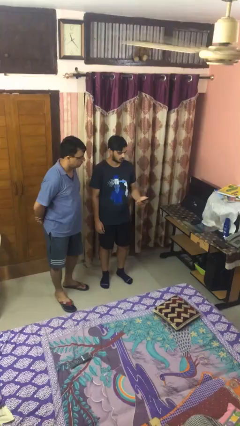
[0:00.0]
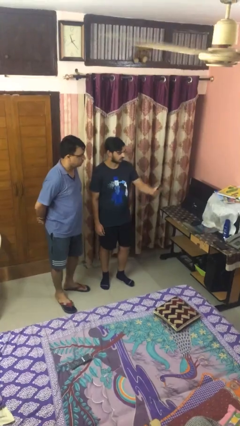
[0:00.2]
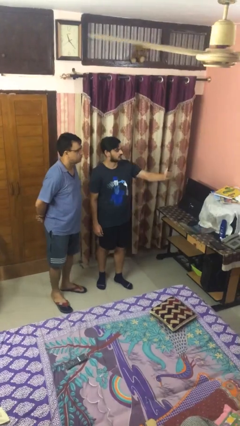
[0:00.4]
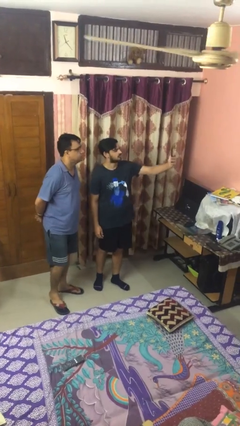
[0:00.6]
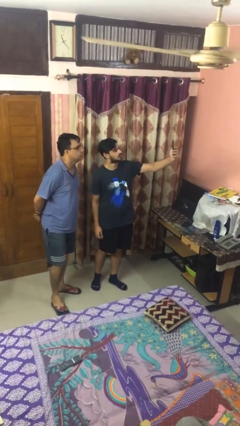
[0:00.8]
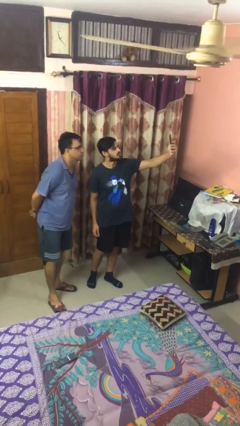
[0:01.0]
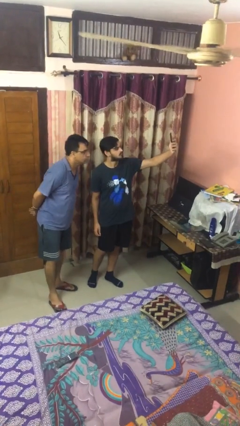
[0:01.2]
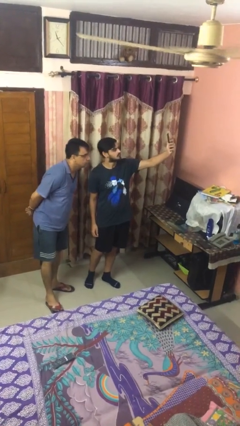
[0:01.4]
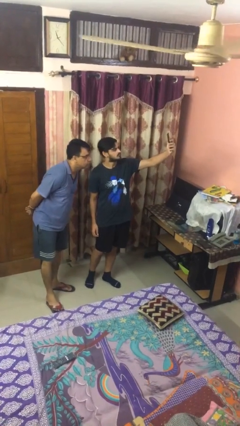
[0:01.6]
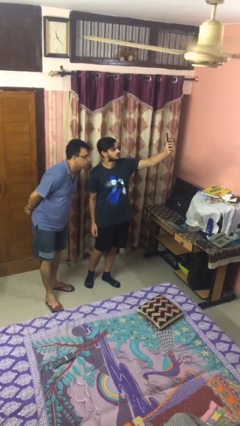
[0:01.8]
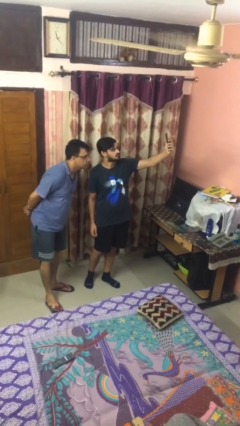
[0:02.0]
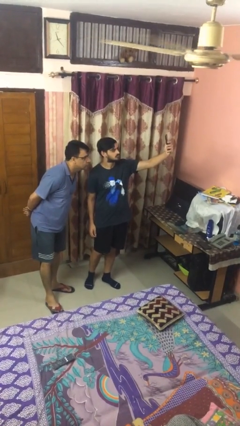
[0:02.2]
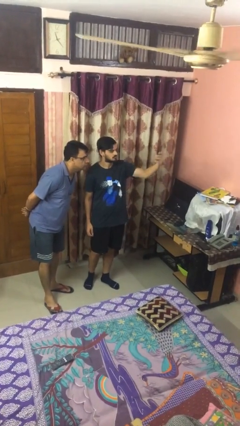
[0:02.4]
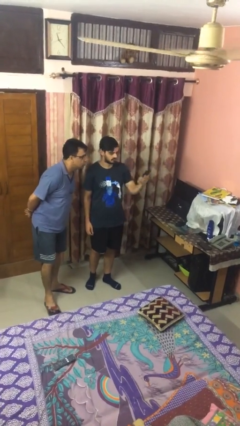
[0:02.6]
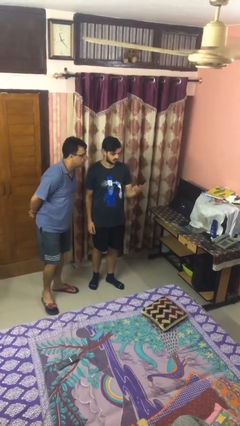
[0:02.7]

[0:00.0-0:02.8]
person takes selfie with person

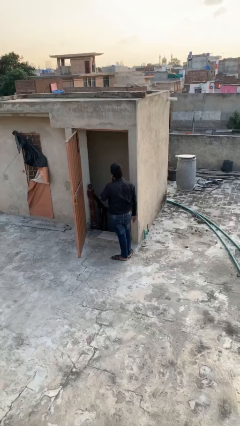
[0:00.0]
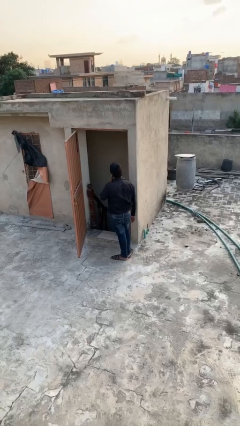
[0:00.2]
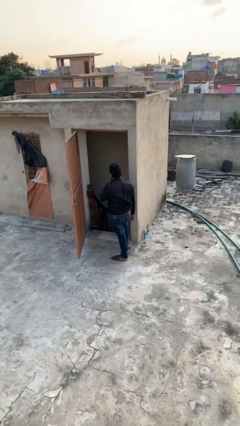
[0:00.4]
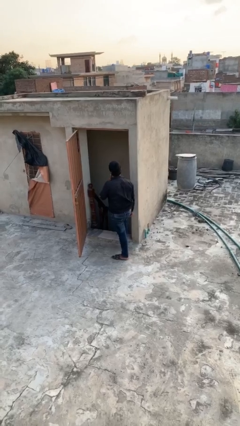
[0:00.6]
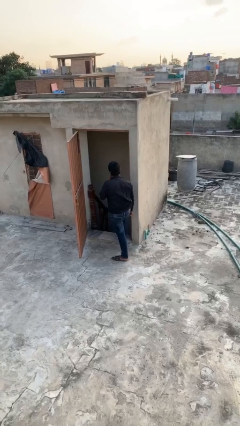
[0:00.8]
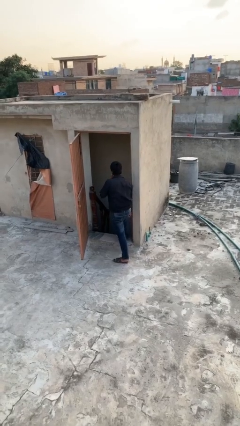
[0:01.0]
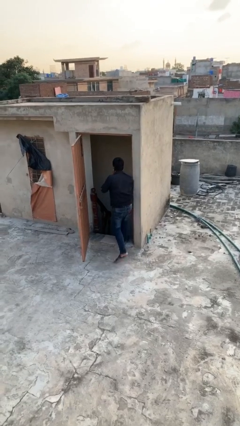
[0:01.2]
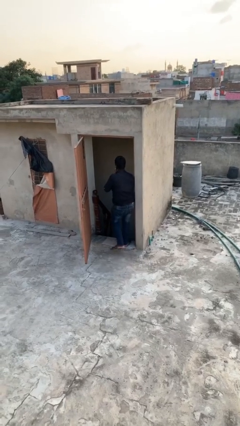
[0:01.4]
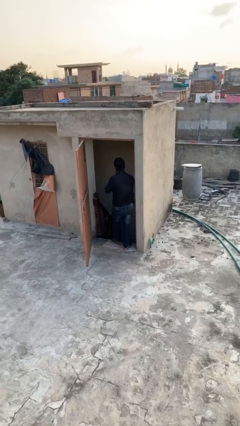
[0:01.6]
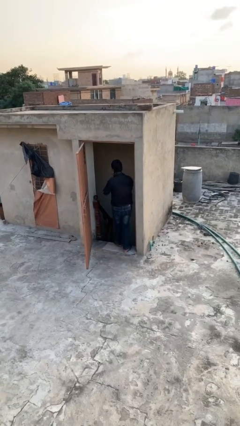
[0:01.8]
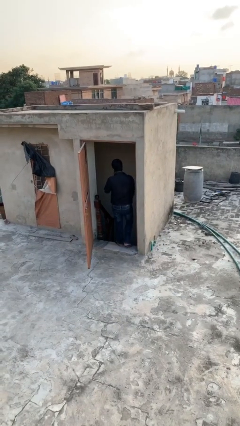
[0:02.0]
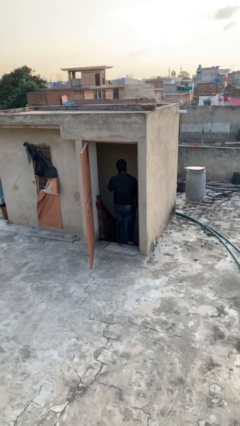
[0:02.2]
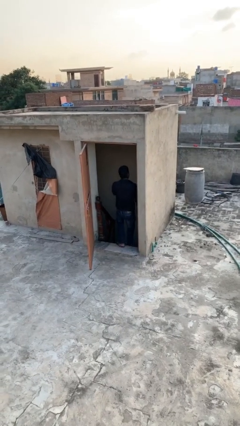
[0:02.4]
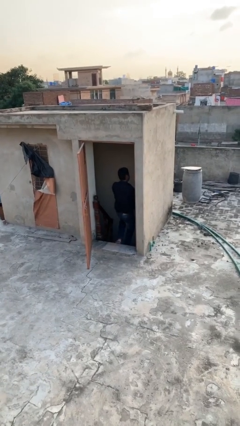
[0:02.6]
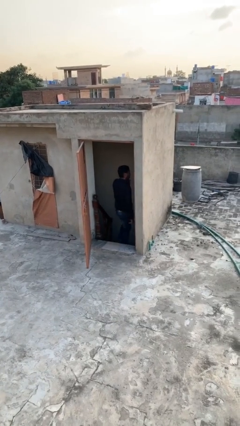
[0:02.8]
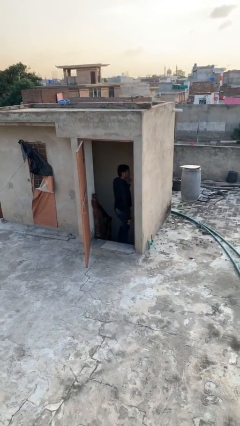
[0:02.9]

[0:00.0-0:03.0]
person exits scene through structure

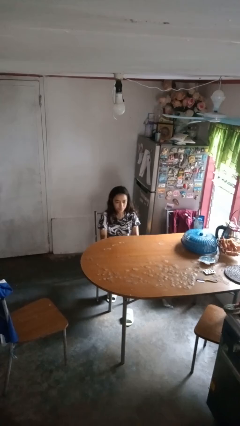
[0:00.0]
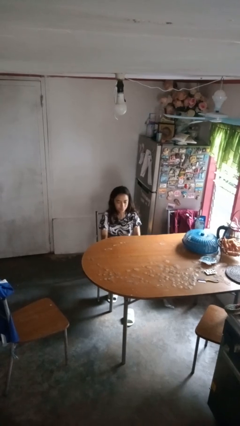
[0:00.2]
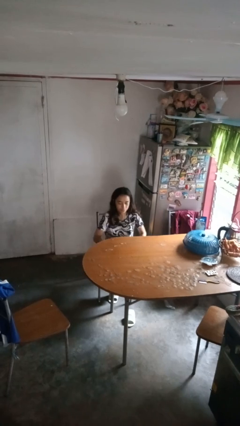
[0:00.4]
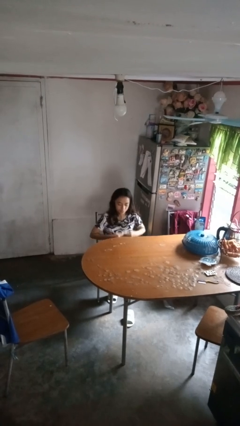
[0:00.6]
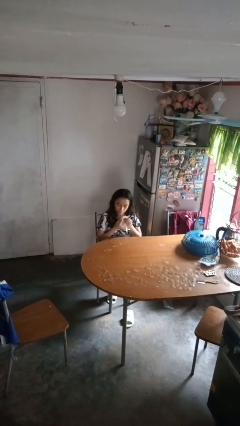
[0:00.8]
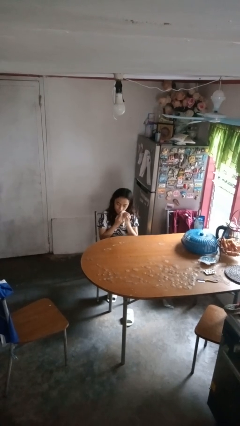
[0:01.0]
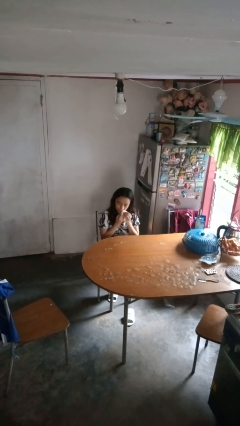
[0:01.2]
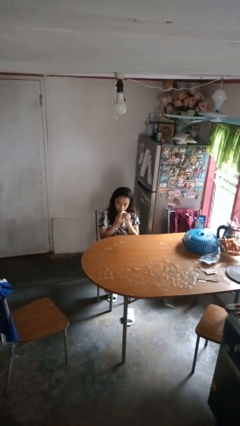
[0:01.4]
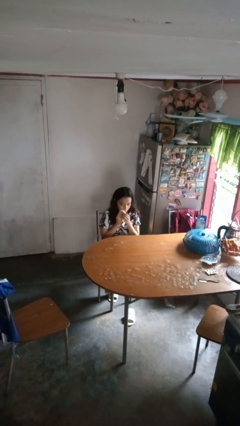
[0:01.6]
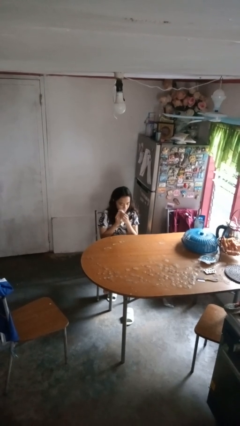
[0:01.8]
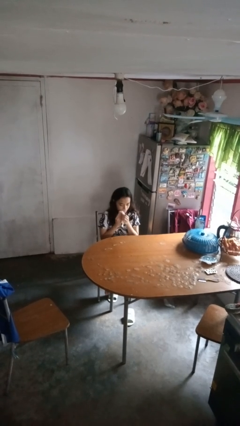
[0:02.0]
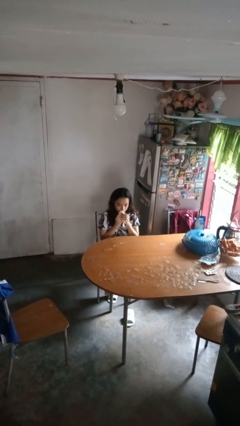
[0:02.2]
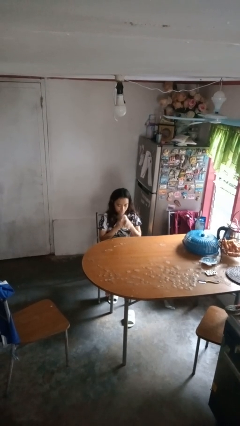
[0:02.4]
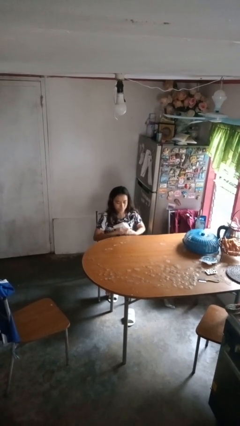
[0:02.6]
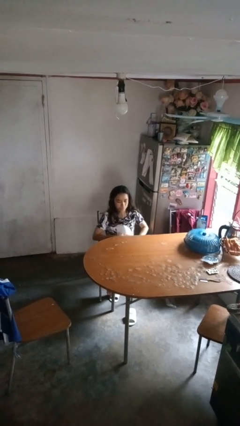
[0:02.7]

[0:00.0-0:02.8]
person wipes mouth with napkin

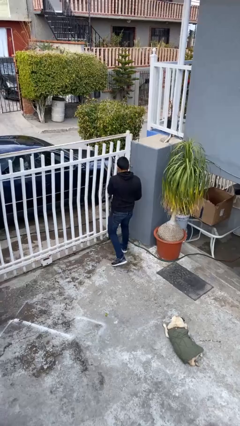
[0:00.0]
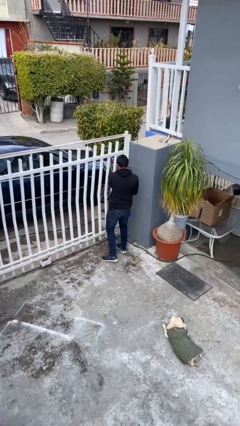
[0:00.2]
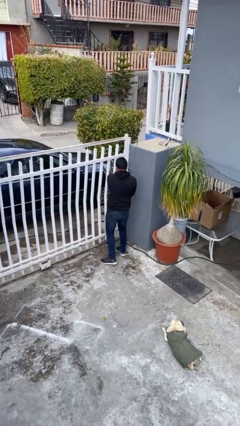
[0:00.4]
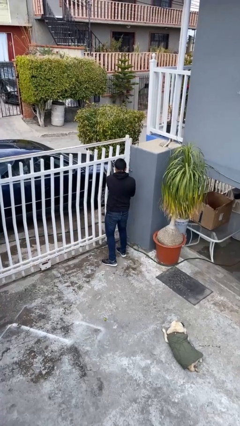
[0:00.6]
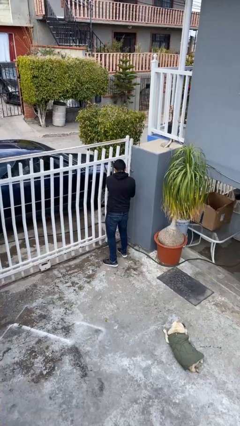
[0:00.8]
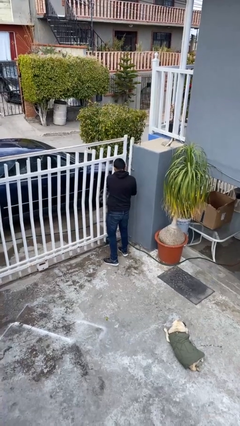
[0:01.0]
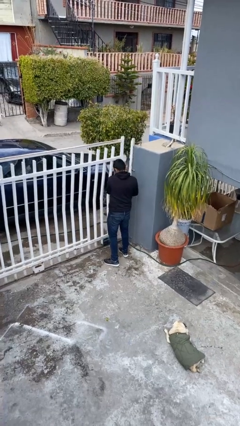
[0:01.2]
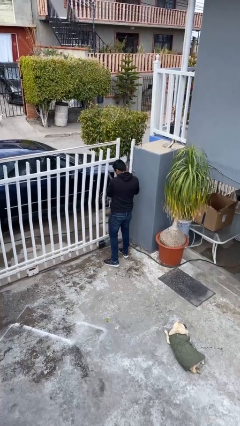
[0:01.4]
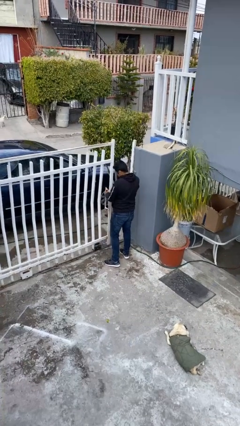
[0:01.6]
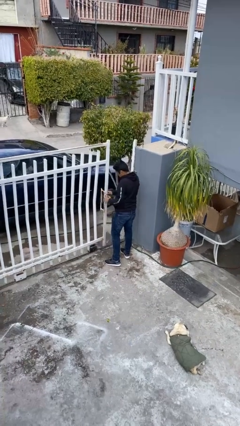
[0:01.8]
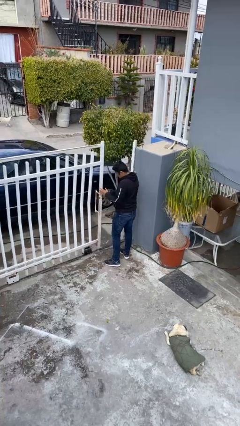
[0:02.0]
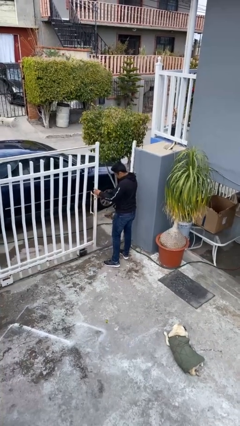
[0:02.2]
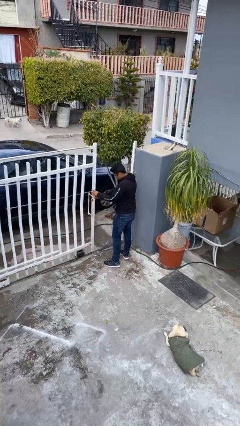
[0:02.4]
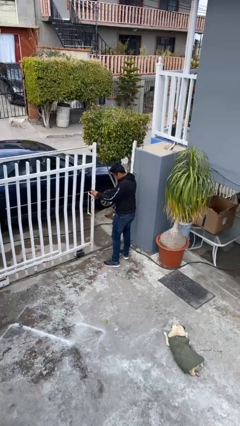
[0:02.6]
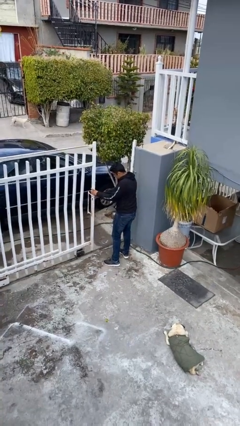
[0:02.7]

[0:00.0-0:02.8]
person opens facility door

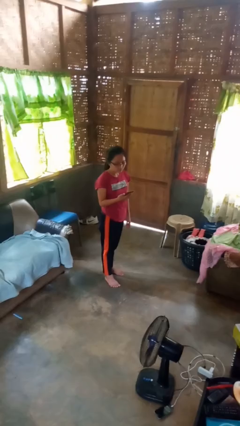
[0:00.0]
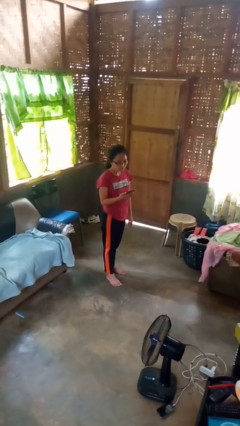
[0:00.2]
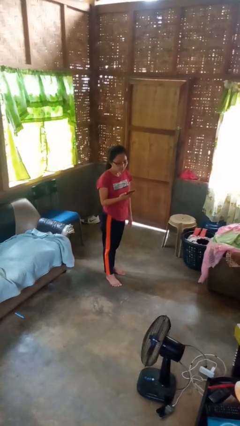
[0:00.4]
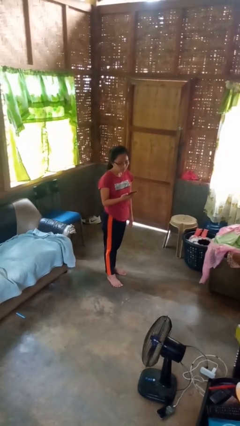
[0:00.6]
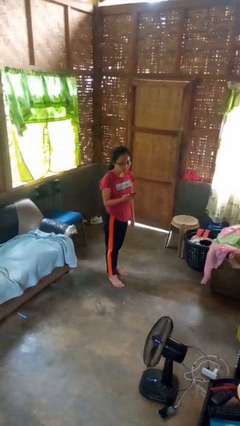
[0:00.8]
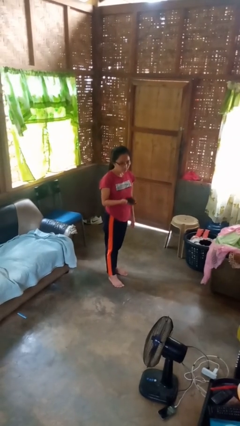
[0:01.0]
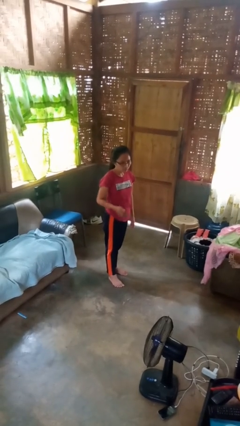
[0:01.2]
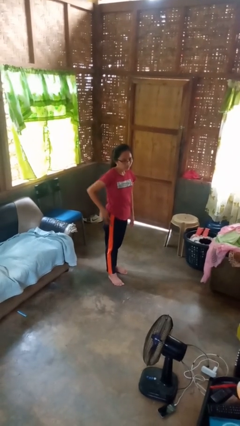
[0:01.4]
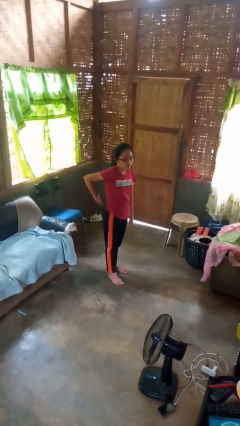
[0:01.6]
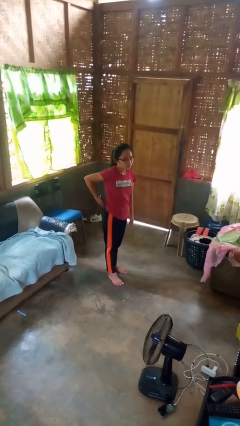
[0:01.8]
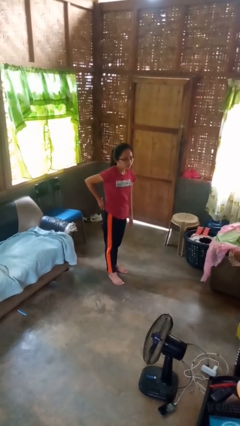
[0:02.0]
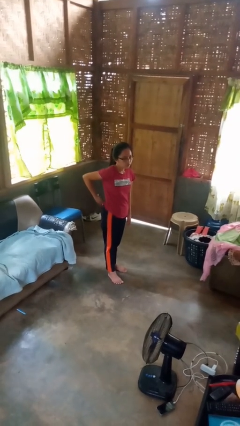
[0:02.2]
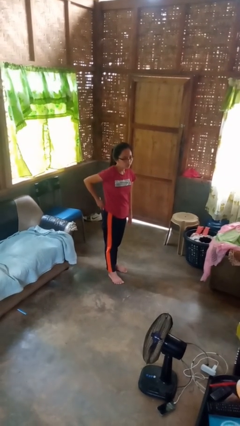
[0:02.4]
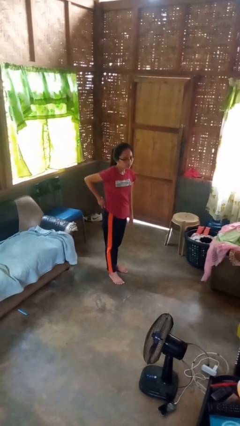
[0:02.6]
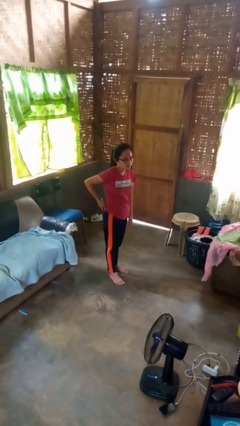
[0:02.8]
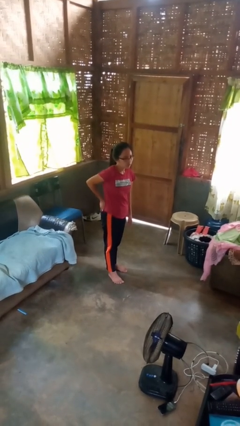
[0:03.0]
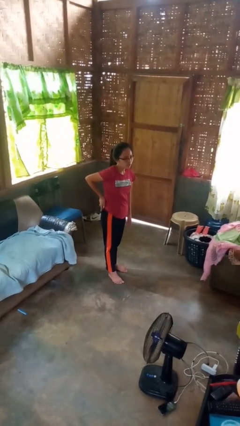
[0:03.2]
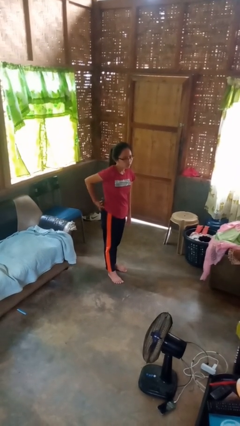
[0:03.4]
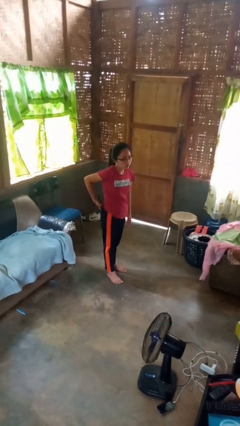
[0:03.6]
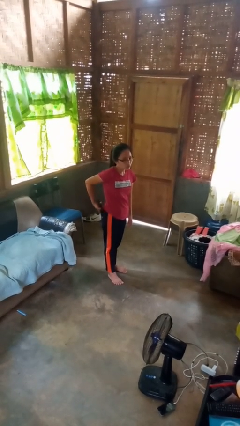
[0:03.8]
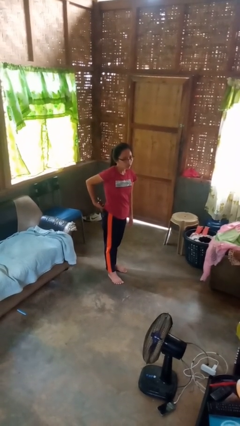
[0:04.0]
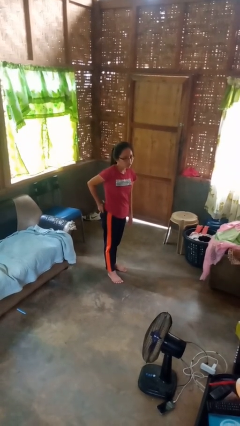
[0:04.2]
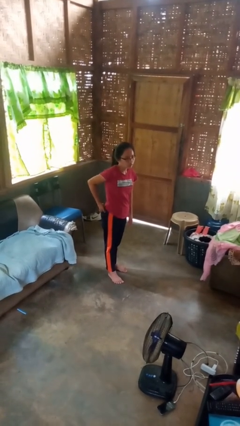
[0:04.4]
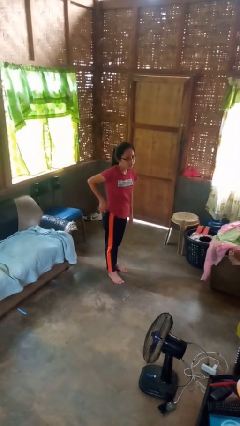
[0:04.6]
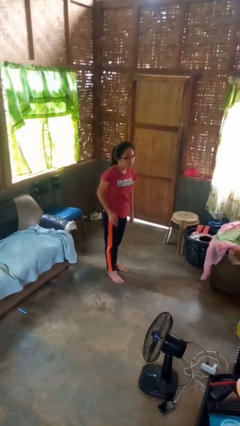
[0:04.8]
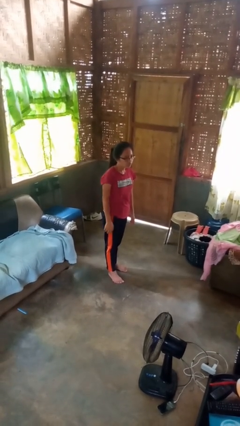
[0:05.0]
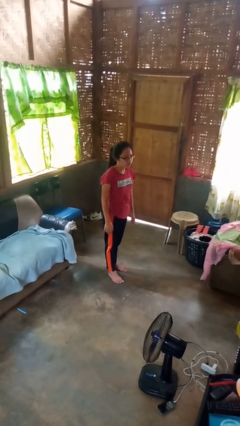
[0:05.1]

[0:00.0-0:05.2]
person puts phone into pocket

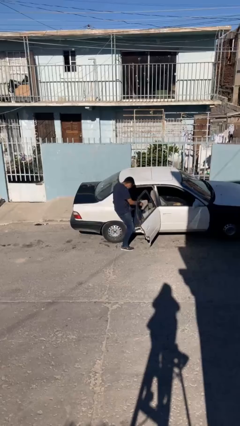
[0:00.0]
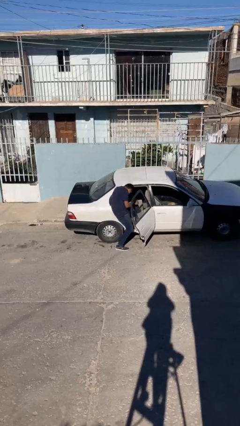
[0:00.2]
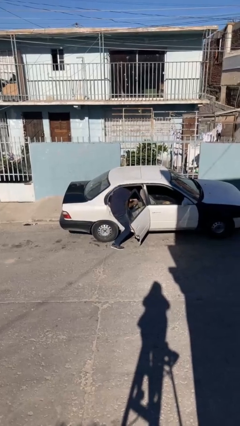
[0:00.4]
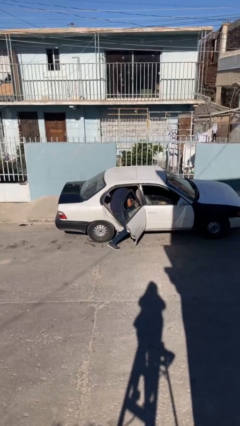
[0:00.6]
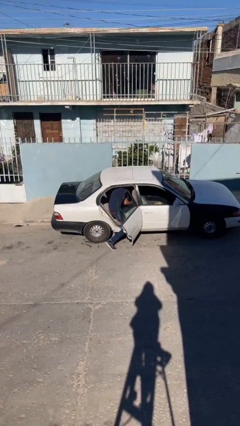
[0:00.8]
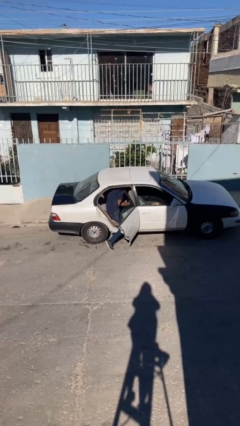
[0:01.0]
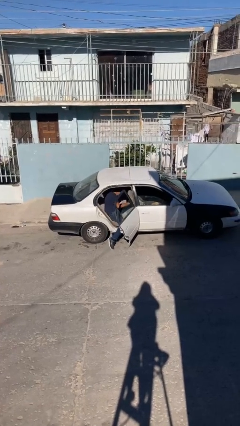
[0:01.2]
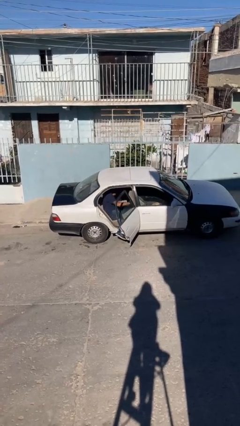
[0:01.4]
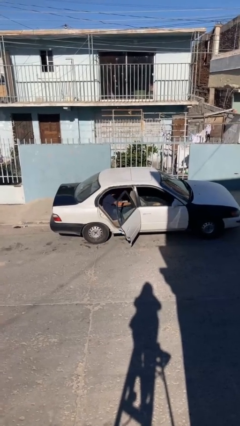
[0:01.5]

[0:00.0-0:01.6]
person enters car
